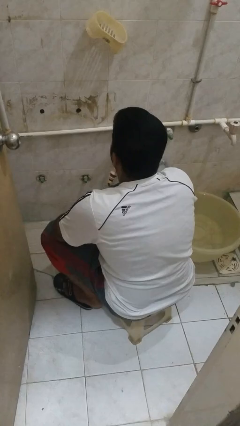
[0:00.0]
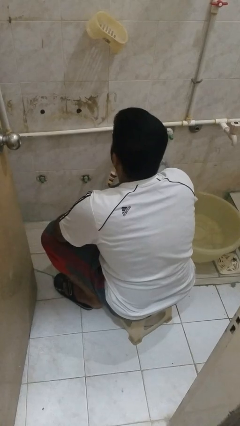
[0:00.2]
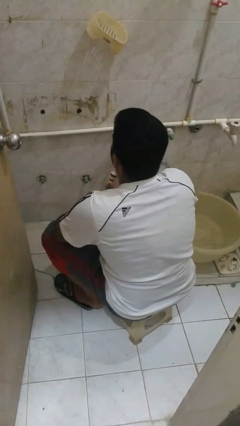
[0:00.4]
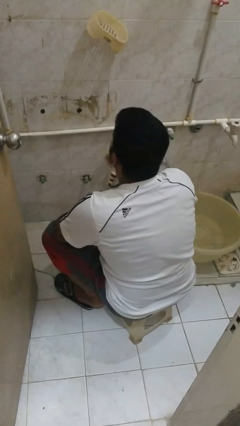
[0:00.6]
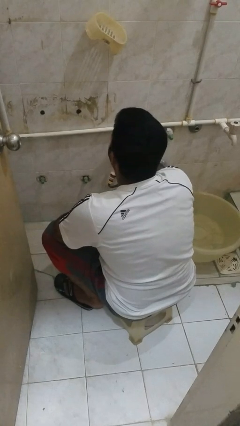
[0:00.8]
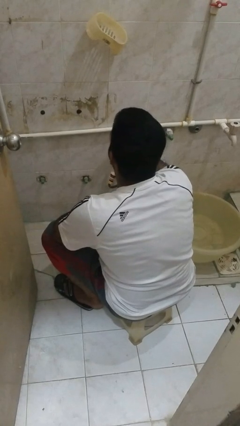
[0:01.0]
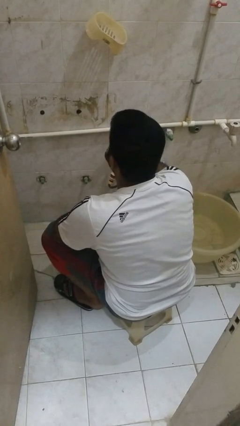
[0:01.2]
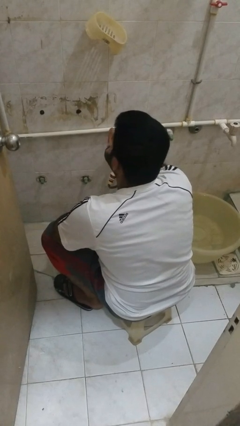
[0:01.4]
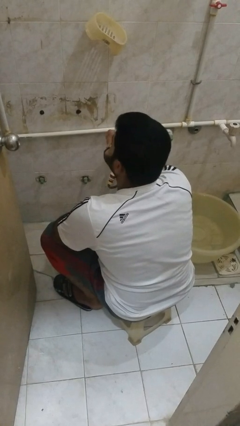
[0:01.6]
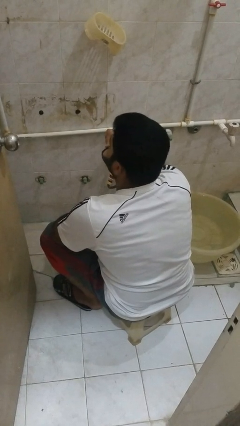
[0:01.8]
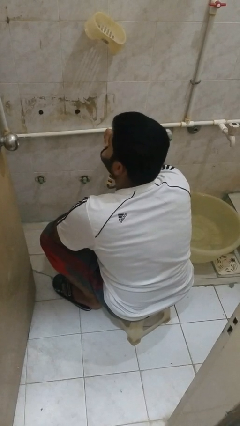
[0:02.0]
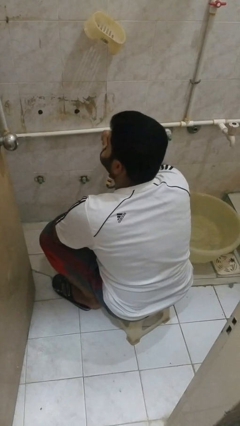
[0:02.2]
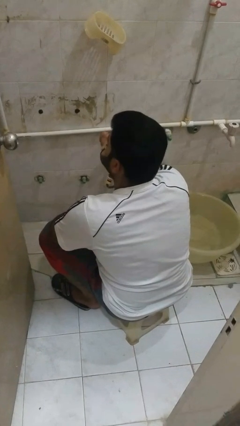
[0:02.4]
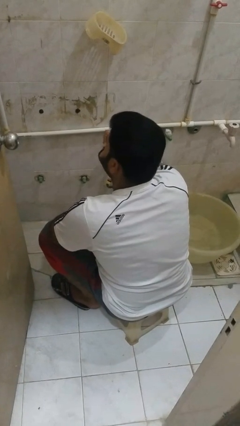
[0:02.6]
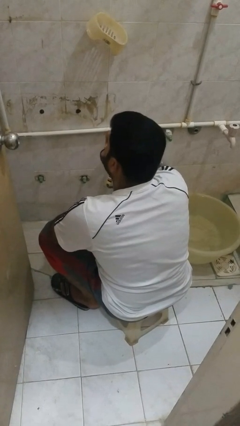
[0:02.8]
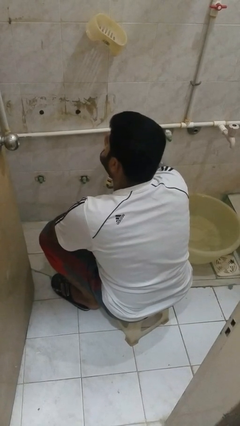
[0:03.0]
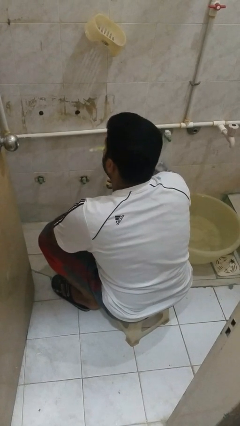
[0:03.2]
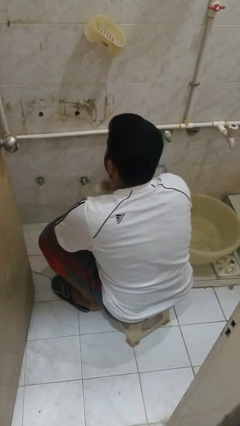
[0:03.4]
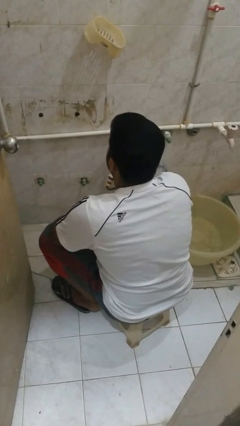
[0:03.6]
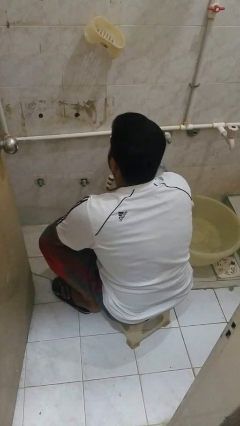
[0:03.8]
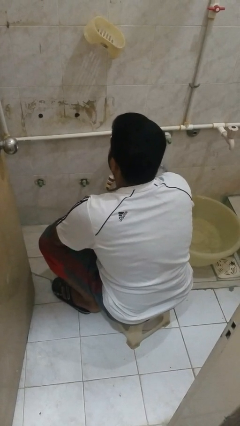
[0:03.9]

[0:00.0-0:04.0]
person brushes teeth

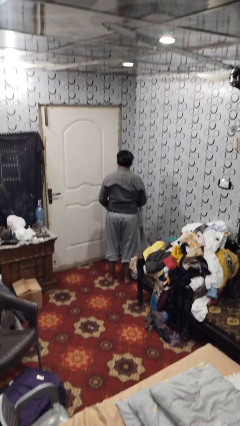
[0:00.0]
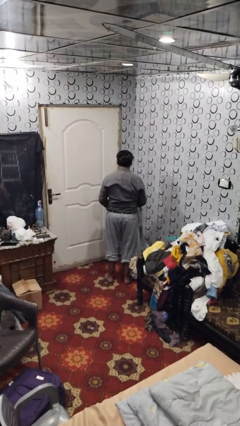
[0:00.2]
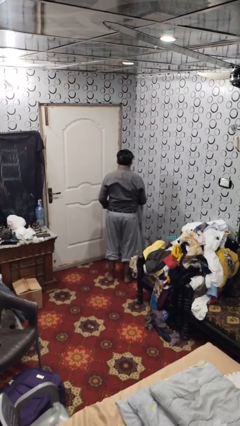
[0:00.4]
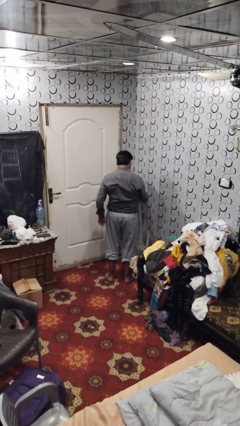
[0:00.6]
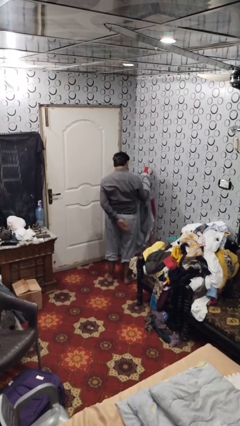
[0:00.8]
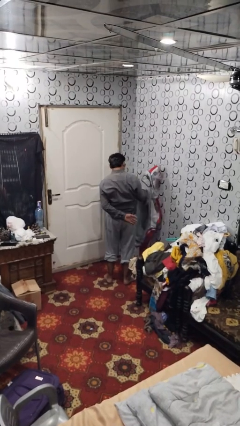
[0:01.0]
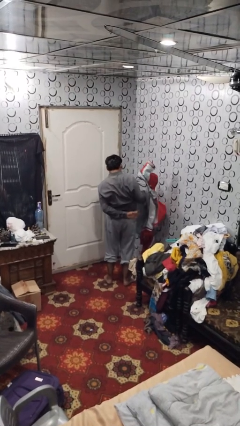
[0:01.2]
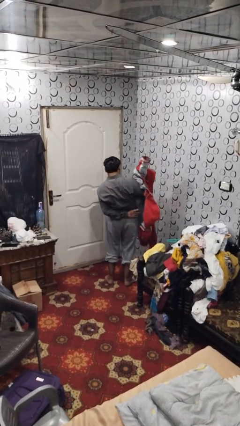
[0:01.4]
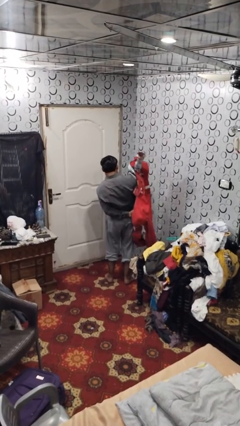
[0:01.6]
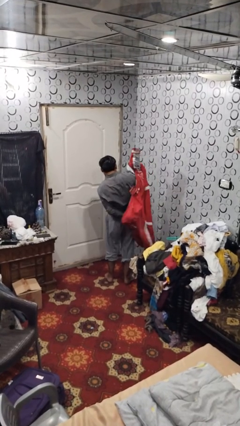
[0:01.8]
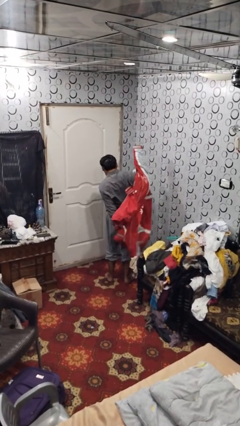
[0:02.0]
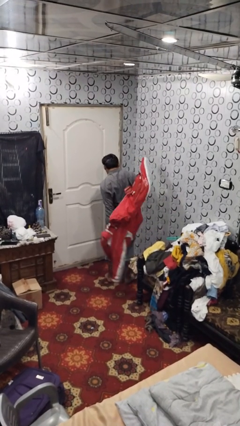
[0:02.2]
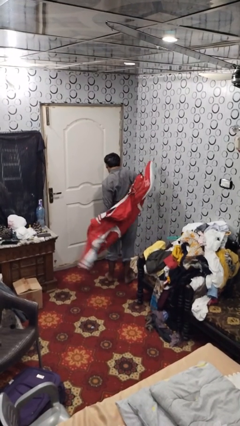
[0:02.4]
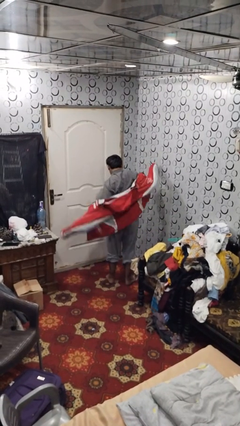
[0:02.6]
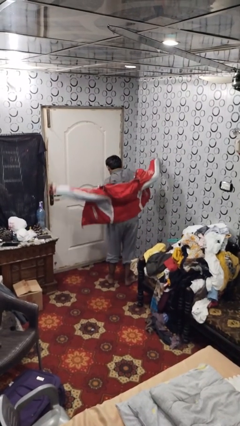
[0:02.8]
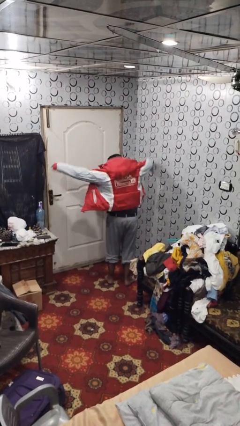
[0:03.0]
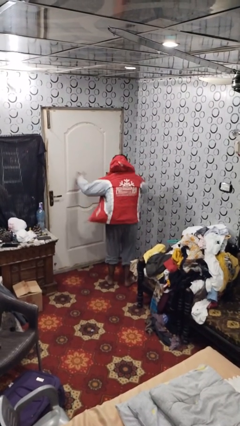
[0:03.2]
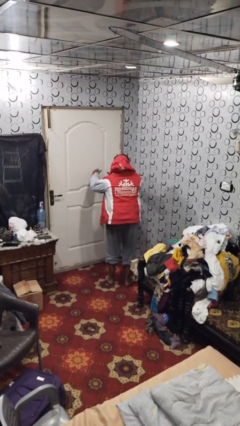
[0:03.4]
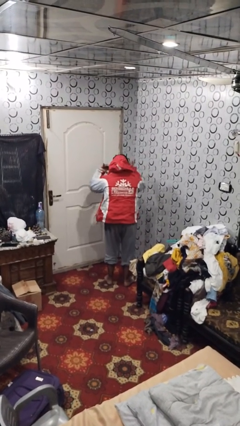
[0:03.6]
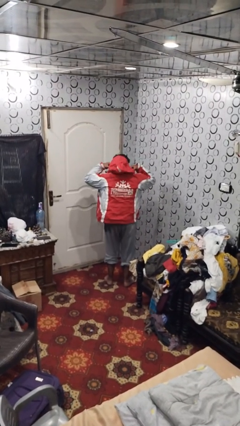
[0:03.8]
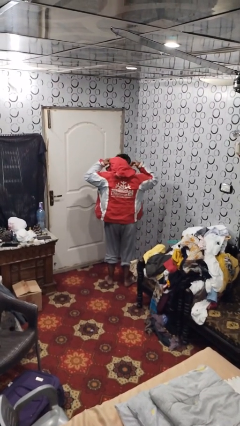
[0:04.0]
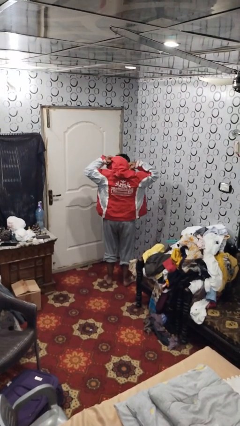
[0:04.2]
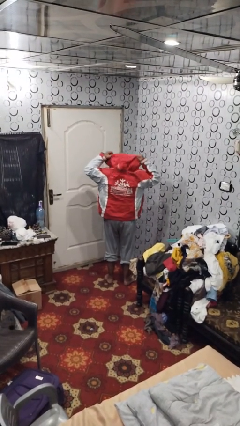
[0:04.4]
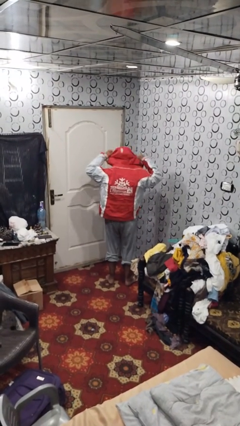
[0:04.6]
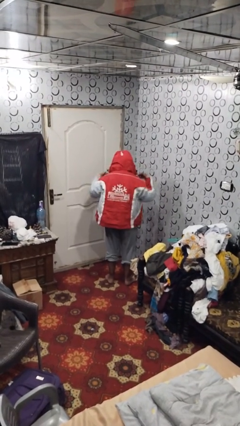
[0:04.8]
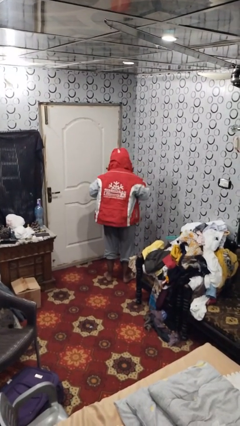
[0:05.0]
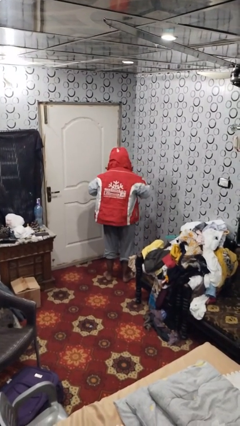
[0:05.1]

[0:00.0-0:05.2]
person puts on hoodie

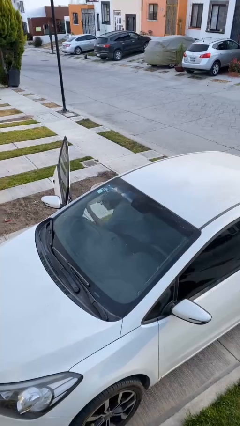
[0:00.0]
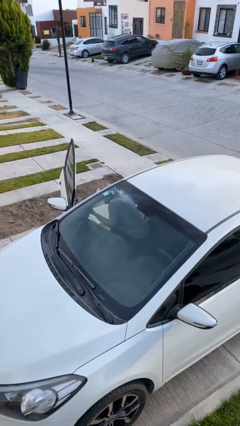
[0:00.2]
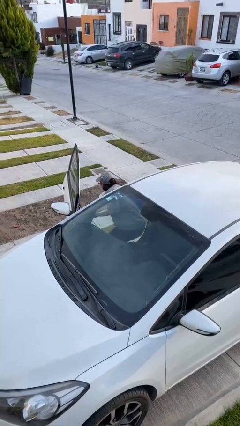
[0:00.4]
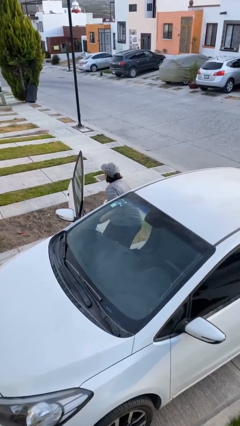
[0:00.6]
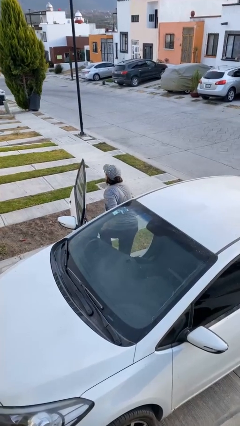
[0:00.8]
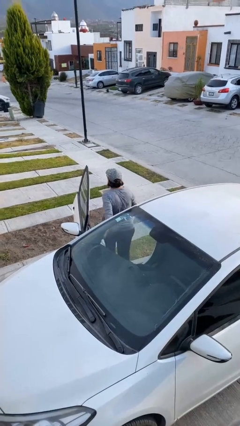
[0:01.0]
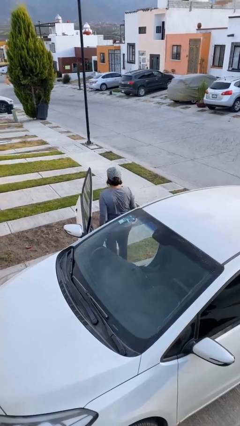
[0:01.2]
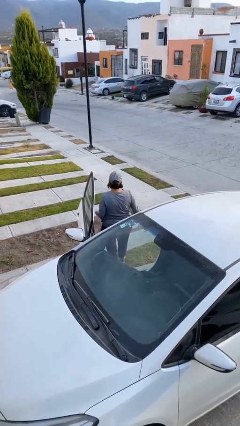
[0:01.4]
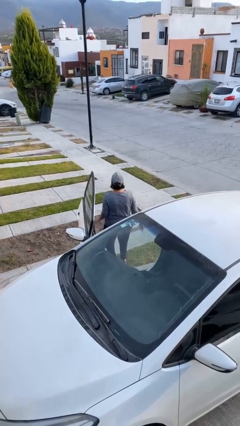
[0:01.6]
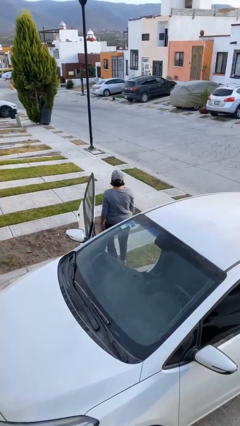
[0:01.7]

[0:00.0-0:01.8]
person exits car

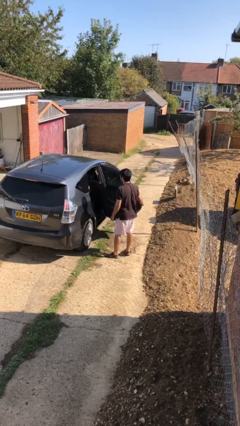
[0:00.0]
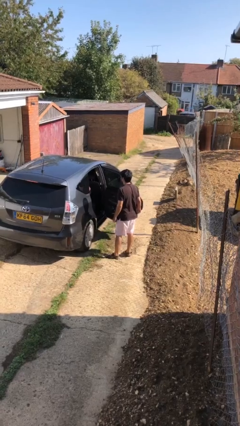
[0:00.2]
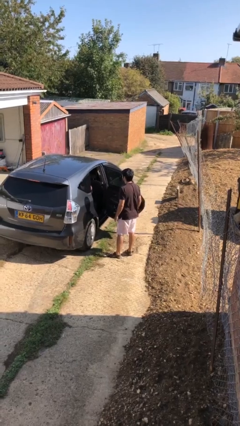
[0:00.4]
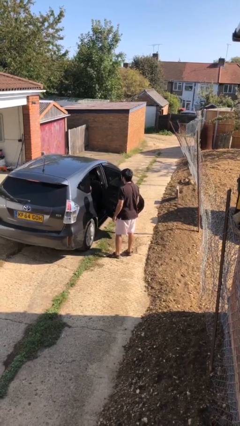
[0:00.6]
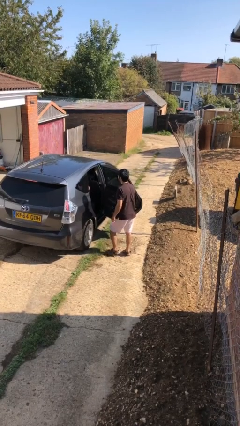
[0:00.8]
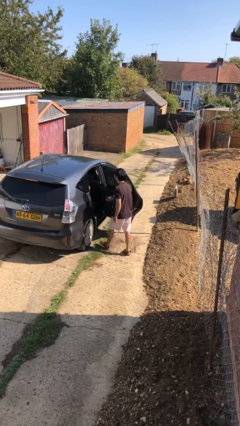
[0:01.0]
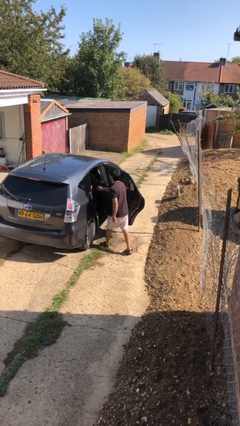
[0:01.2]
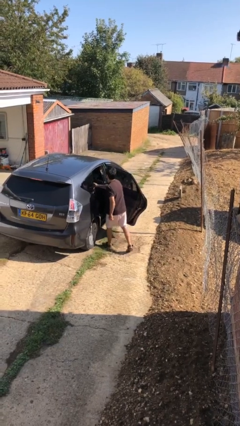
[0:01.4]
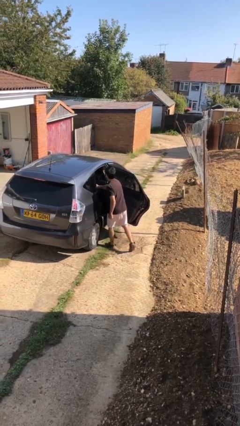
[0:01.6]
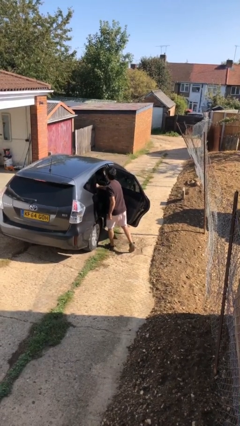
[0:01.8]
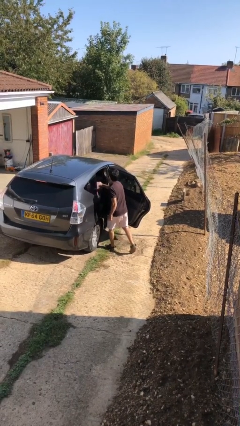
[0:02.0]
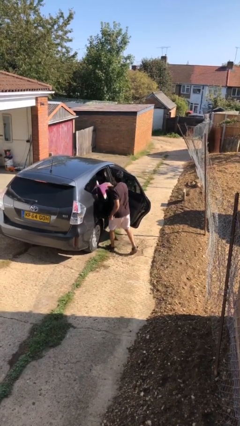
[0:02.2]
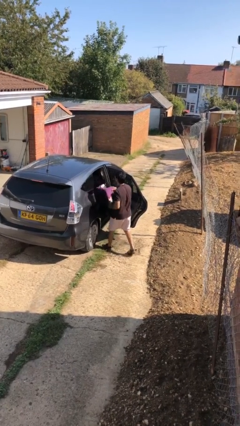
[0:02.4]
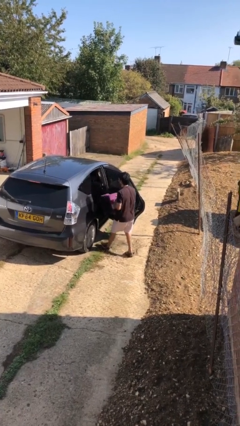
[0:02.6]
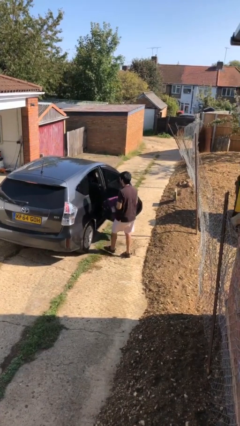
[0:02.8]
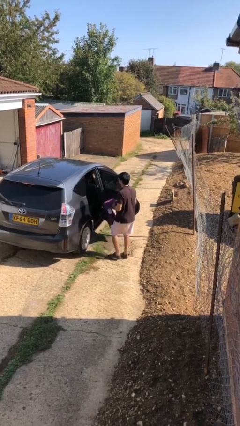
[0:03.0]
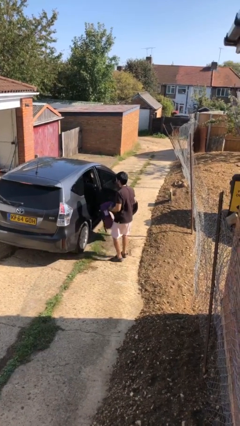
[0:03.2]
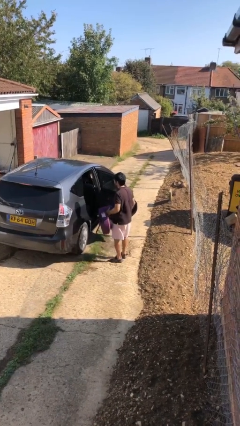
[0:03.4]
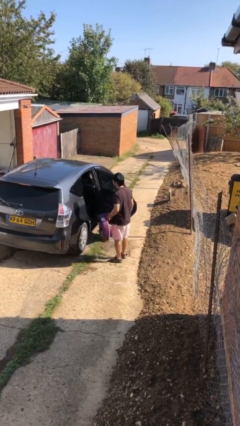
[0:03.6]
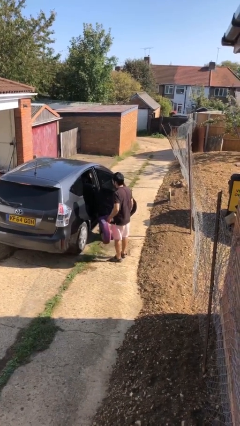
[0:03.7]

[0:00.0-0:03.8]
person unloads car

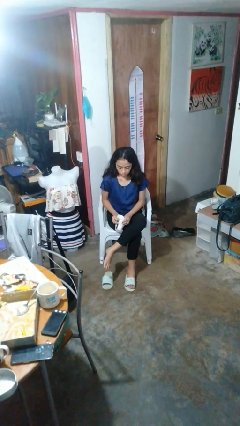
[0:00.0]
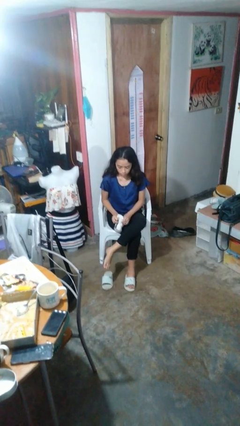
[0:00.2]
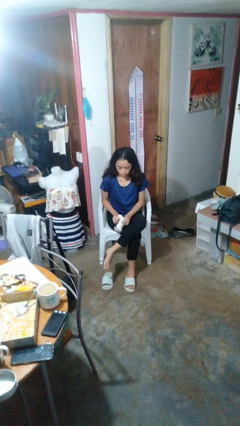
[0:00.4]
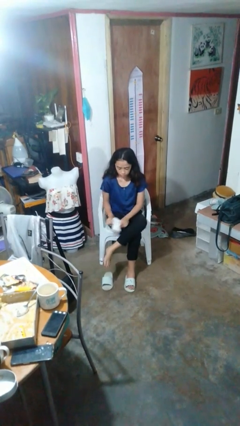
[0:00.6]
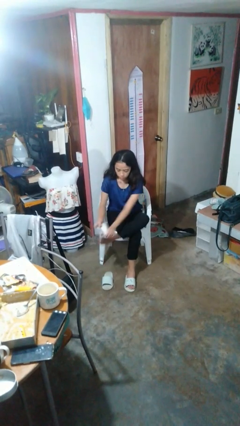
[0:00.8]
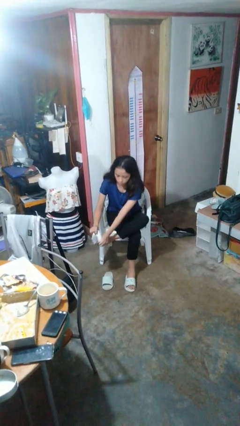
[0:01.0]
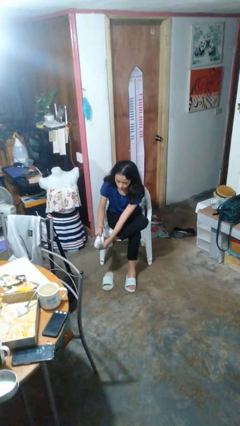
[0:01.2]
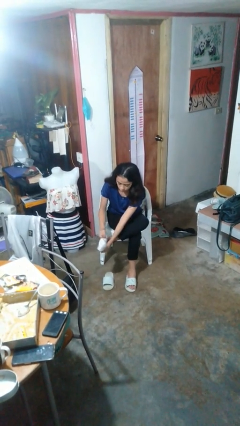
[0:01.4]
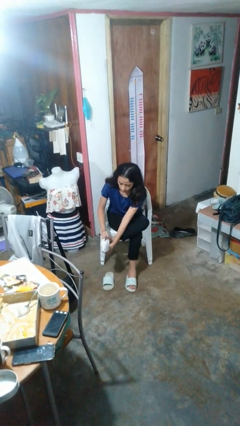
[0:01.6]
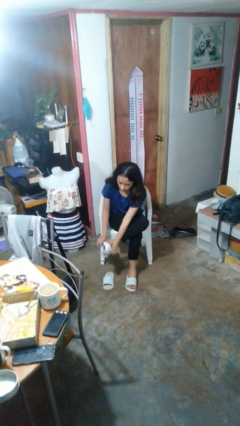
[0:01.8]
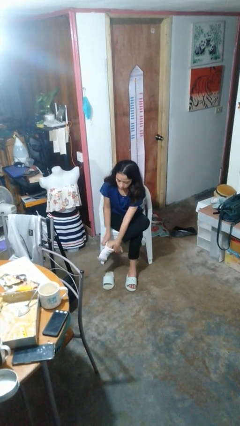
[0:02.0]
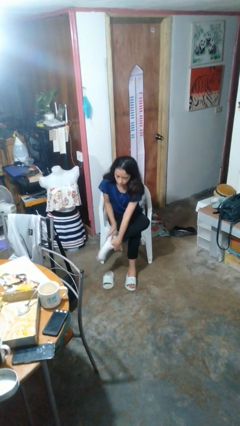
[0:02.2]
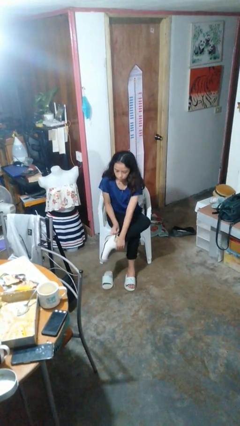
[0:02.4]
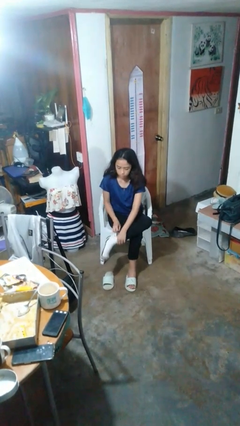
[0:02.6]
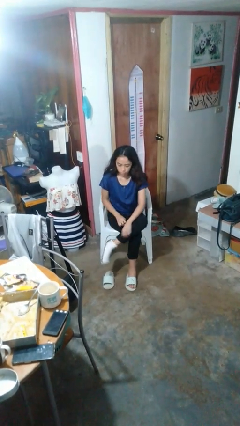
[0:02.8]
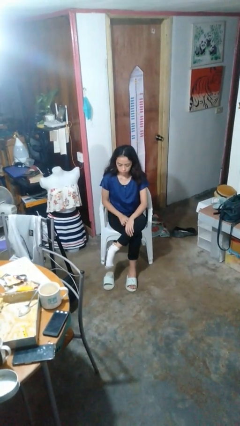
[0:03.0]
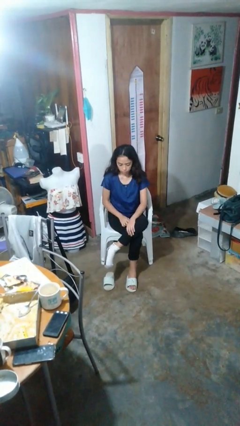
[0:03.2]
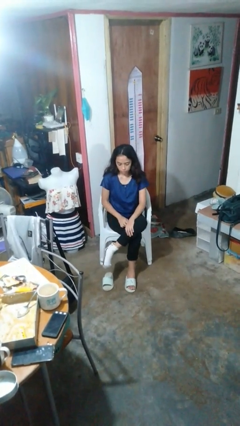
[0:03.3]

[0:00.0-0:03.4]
person puts on socks
